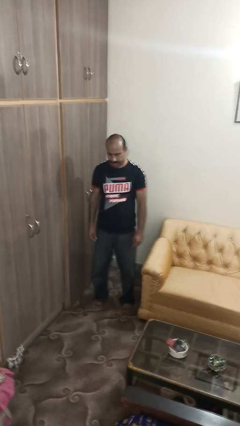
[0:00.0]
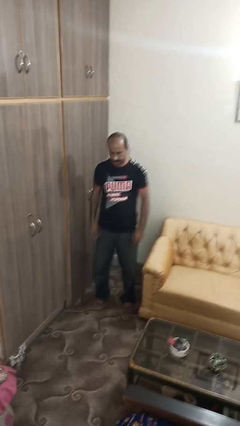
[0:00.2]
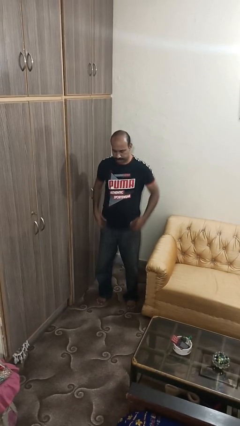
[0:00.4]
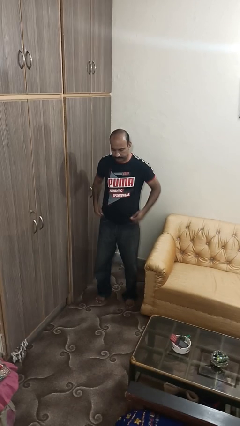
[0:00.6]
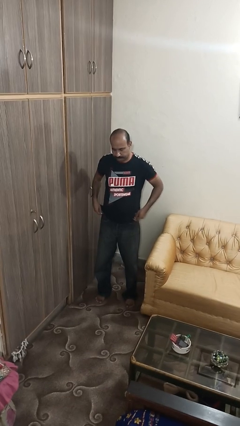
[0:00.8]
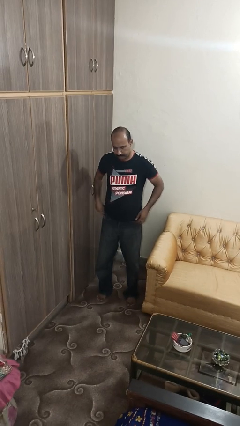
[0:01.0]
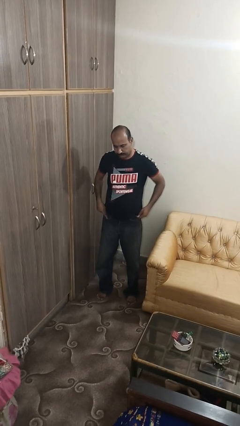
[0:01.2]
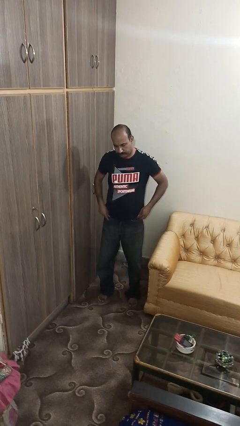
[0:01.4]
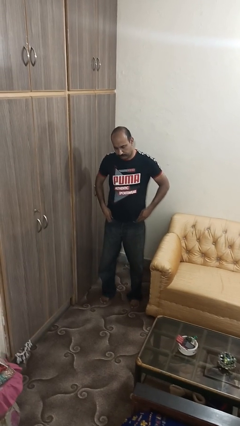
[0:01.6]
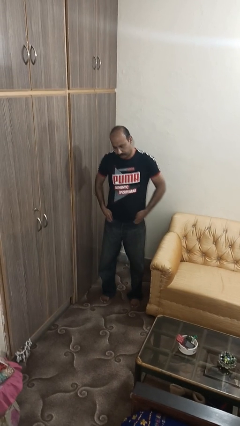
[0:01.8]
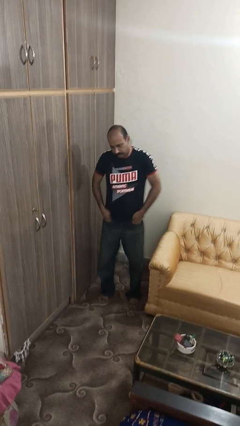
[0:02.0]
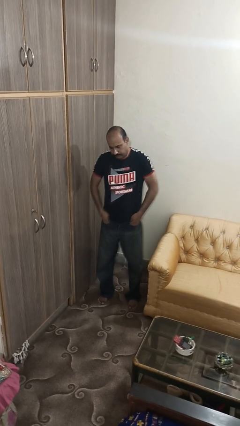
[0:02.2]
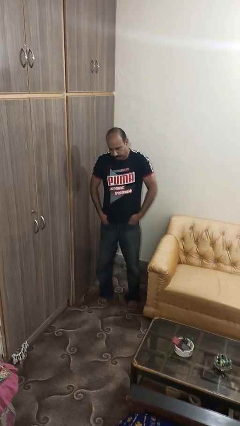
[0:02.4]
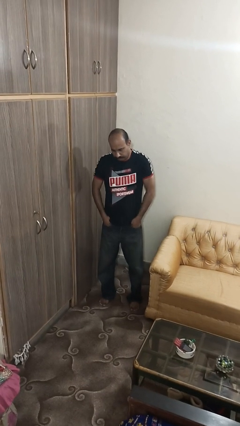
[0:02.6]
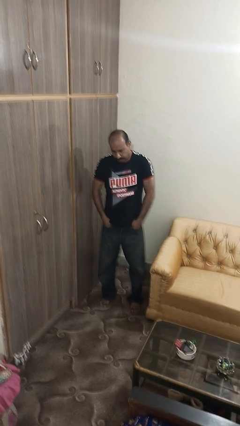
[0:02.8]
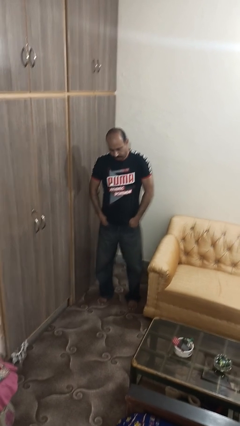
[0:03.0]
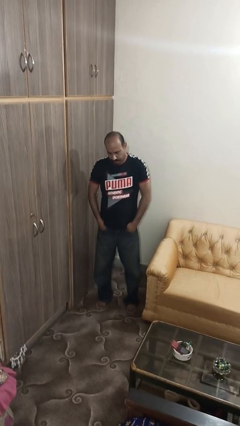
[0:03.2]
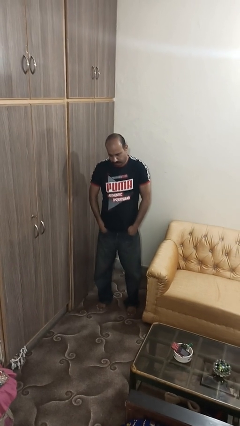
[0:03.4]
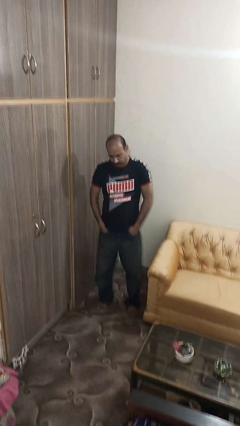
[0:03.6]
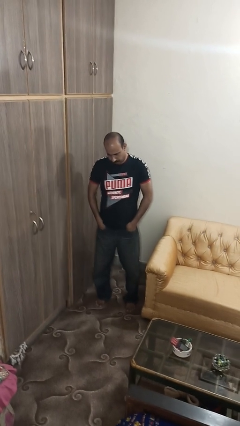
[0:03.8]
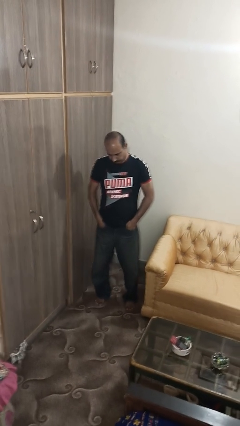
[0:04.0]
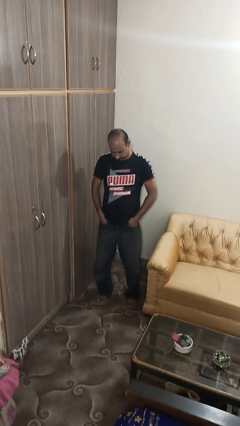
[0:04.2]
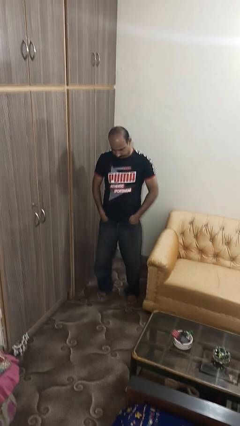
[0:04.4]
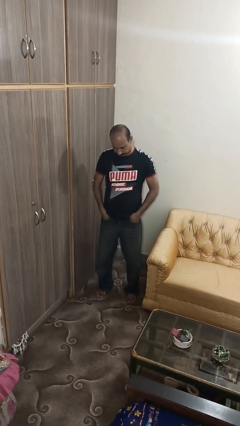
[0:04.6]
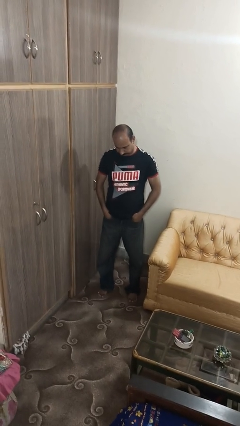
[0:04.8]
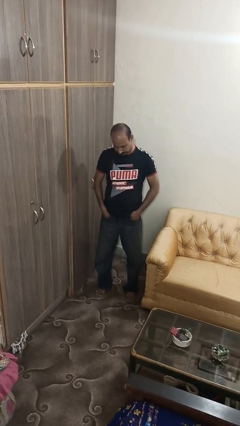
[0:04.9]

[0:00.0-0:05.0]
person puts hands in back pockets

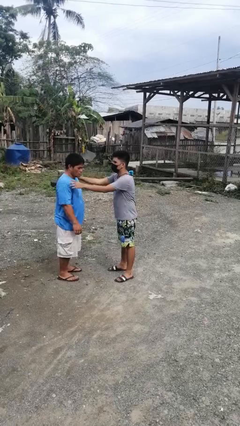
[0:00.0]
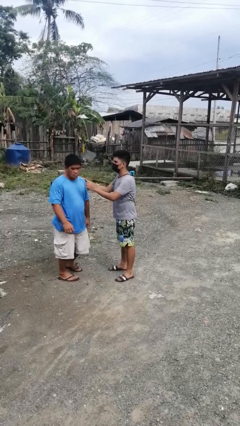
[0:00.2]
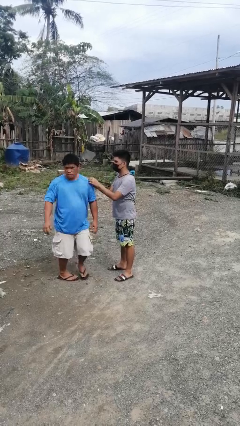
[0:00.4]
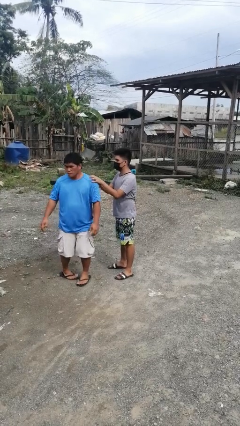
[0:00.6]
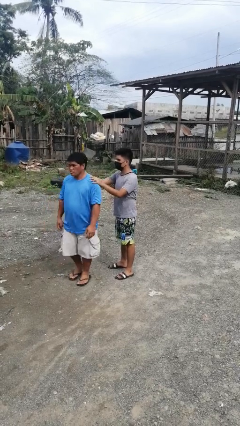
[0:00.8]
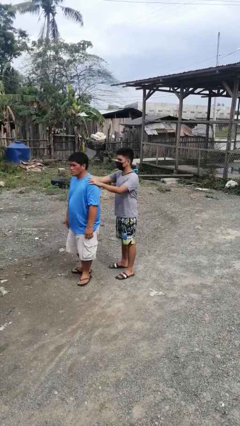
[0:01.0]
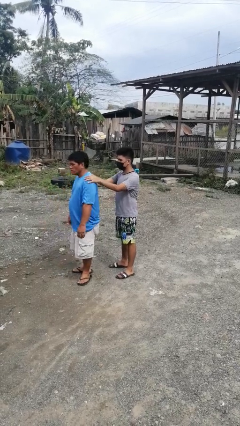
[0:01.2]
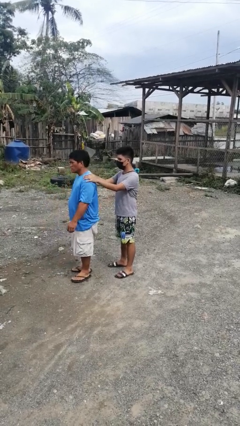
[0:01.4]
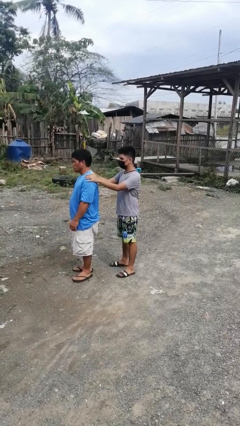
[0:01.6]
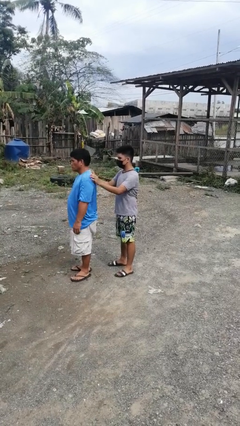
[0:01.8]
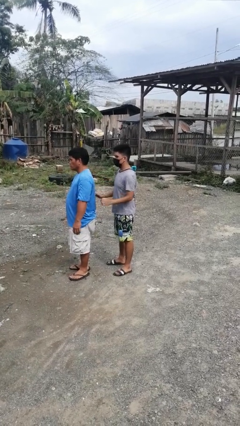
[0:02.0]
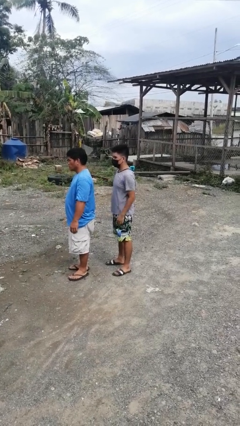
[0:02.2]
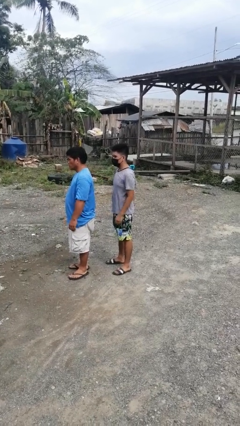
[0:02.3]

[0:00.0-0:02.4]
person spins person around

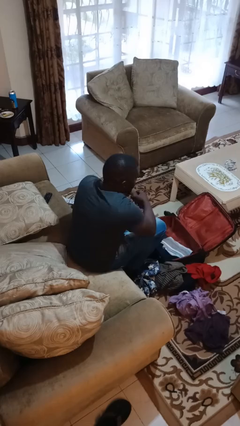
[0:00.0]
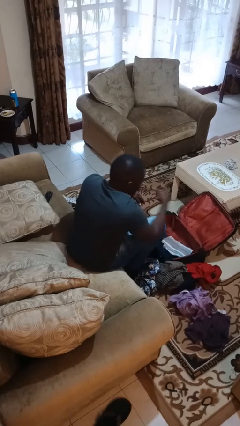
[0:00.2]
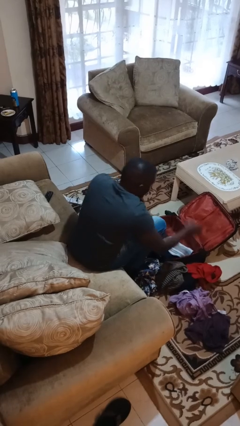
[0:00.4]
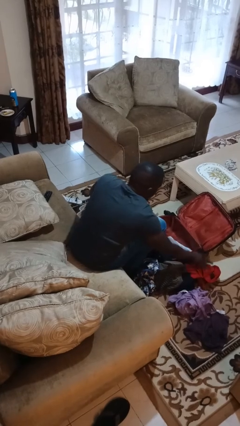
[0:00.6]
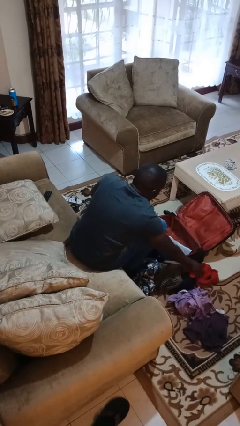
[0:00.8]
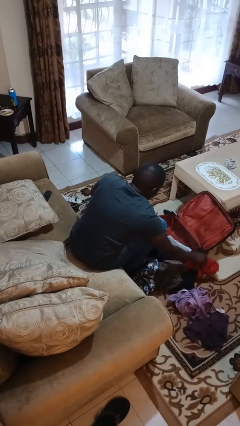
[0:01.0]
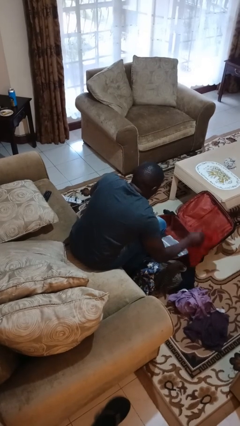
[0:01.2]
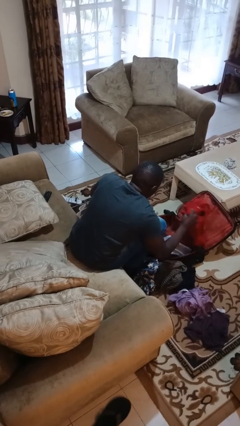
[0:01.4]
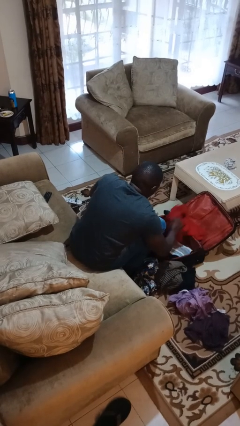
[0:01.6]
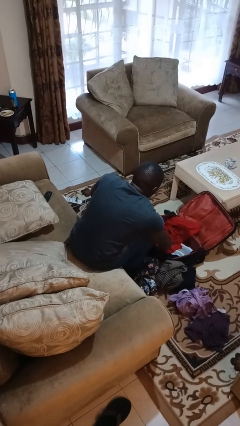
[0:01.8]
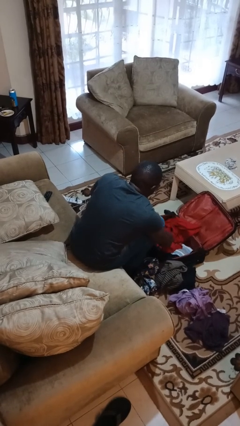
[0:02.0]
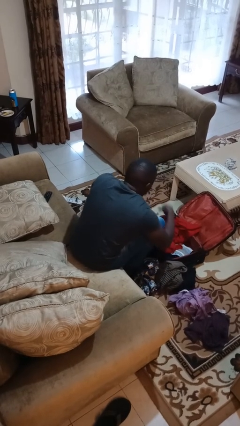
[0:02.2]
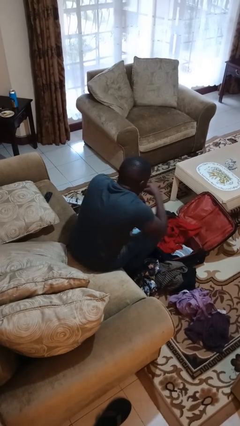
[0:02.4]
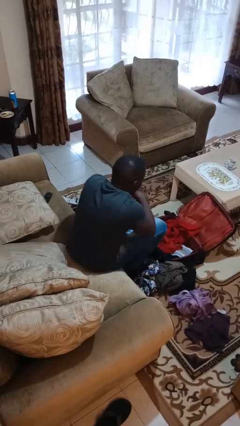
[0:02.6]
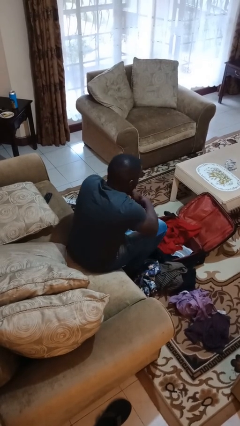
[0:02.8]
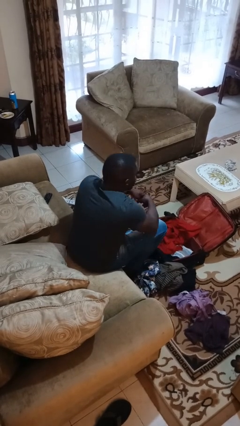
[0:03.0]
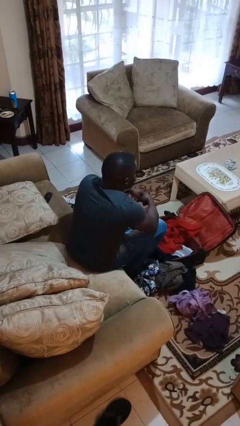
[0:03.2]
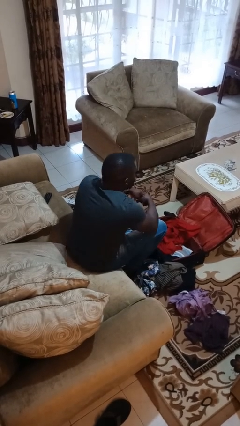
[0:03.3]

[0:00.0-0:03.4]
person loads clothes into suitcase

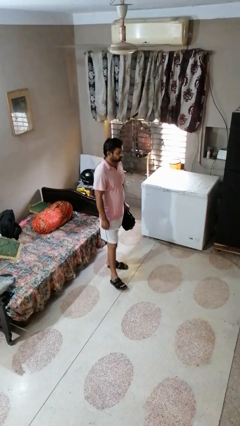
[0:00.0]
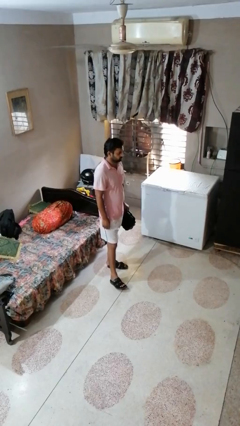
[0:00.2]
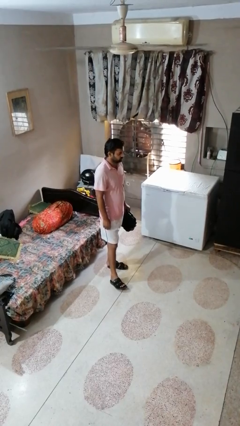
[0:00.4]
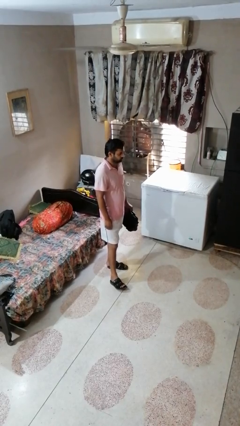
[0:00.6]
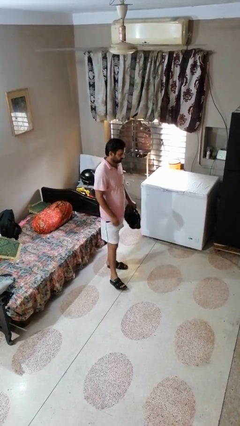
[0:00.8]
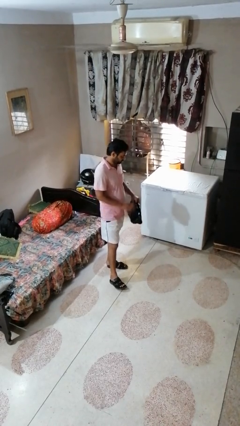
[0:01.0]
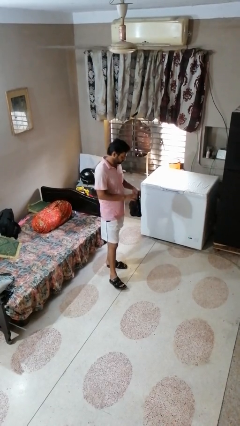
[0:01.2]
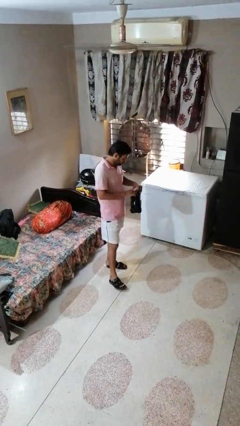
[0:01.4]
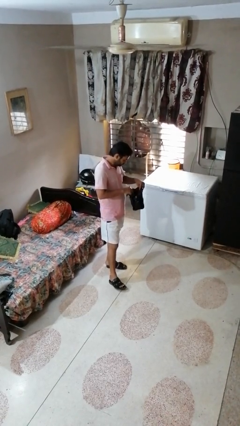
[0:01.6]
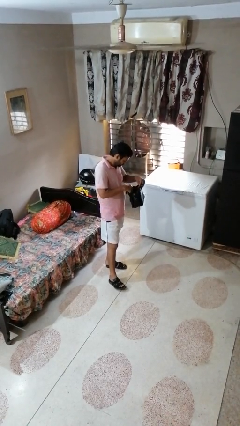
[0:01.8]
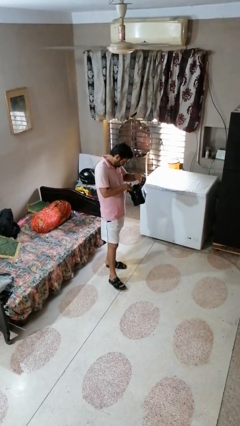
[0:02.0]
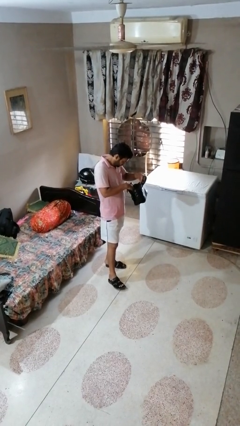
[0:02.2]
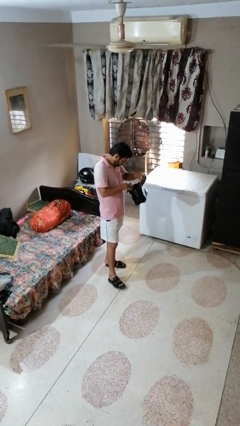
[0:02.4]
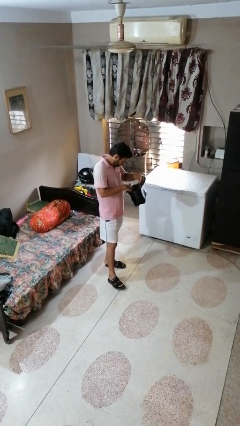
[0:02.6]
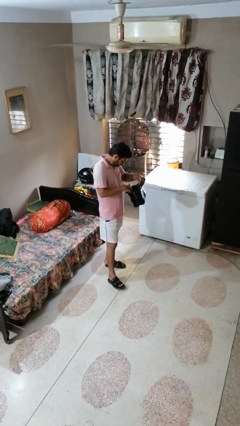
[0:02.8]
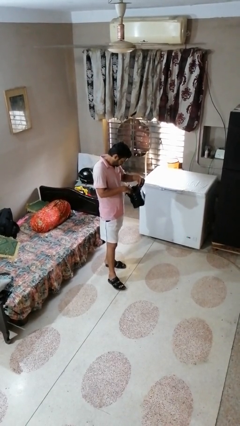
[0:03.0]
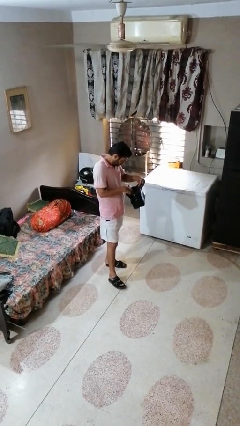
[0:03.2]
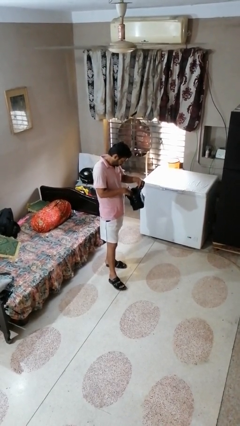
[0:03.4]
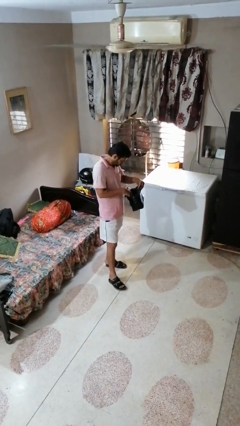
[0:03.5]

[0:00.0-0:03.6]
person searches in purse

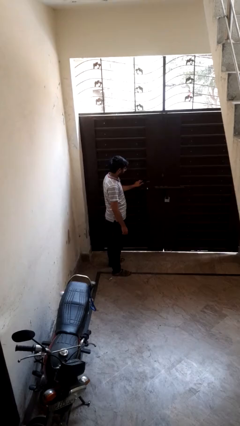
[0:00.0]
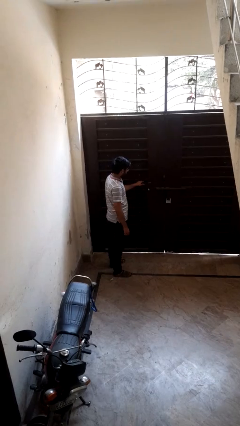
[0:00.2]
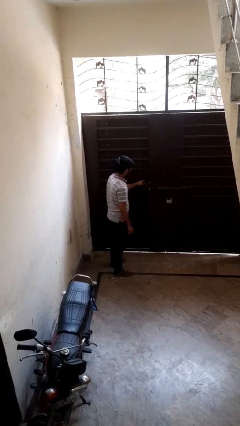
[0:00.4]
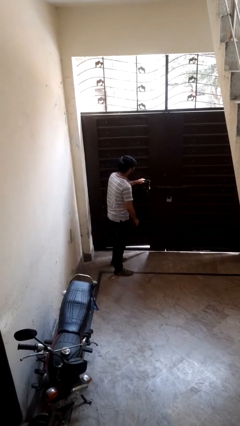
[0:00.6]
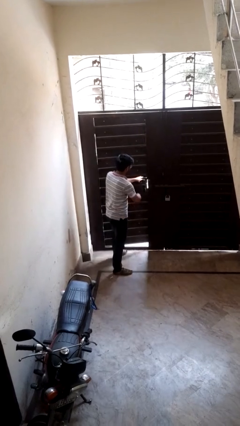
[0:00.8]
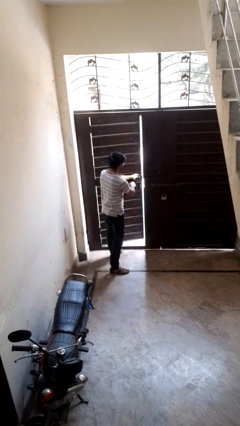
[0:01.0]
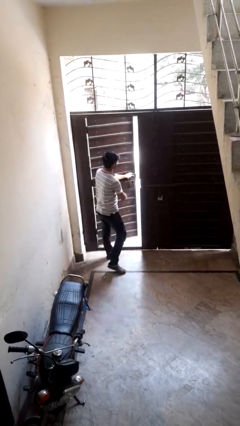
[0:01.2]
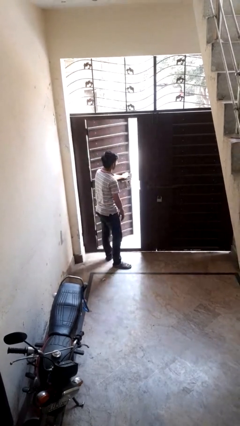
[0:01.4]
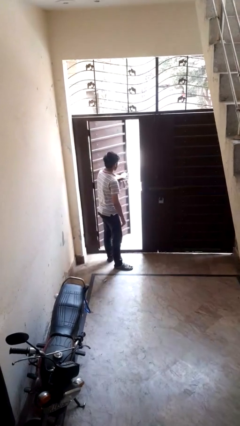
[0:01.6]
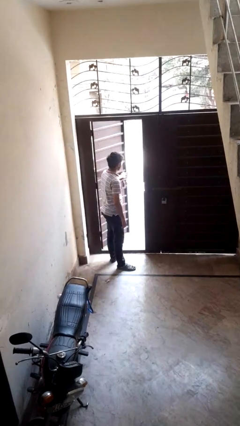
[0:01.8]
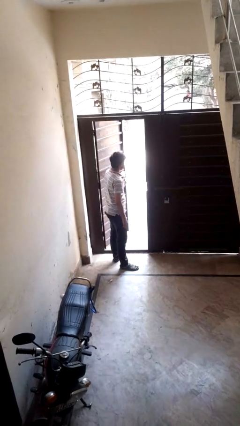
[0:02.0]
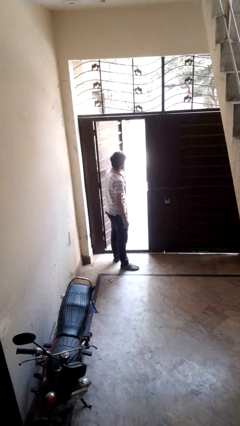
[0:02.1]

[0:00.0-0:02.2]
person opens facility door

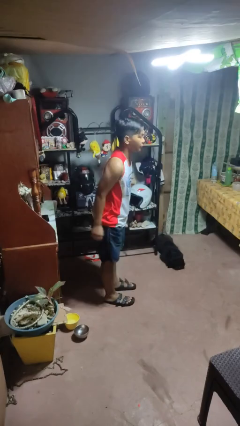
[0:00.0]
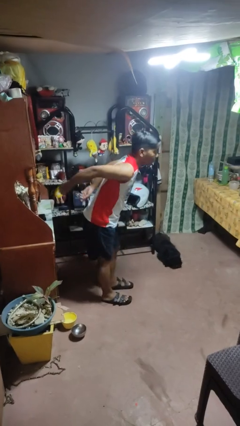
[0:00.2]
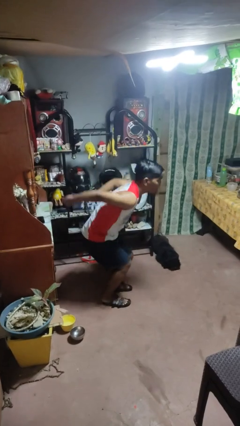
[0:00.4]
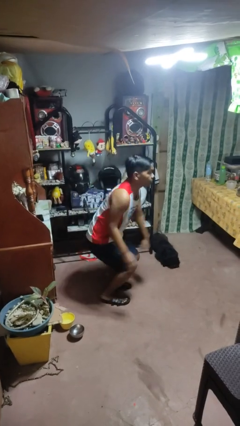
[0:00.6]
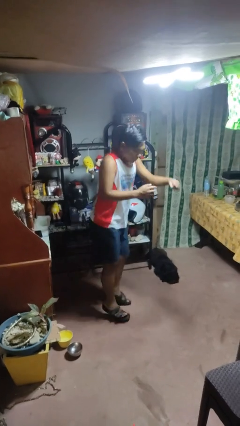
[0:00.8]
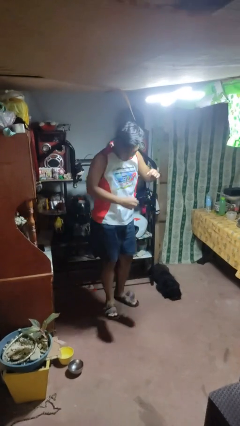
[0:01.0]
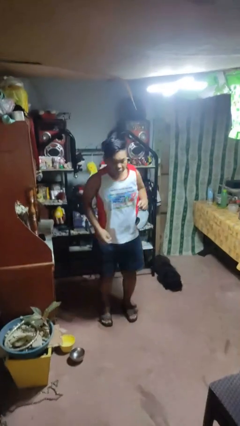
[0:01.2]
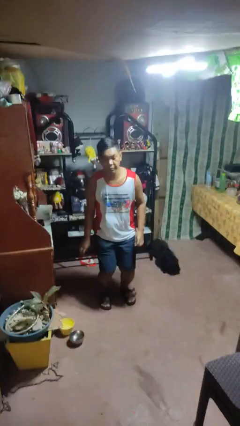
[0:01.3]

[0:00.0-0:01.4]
person jumps
